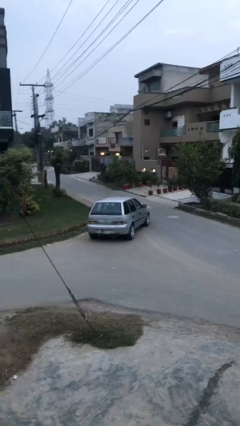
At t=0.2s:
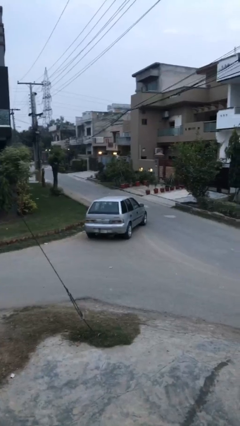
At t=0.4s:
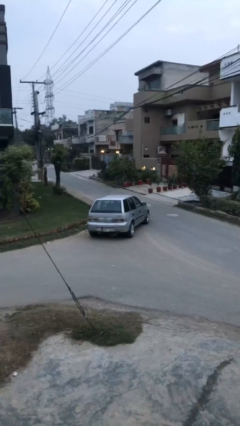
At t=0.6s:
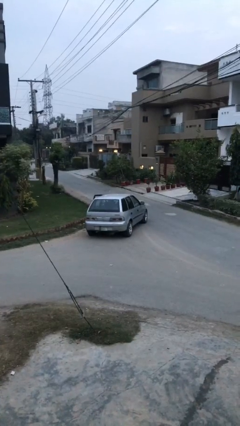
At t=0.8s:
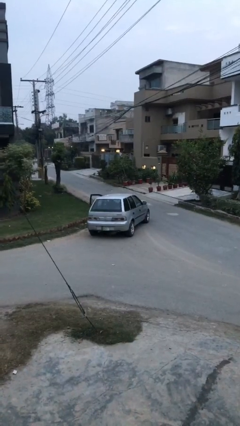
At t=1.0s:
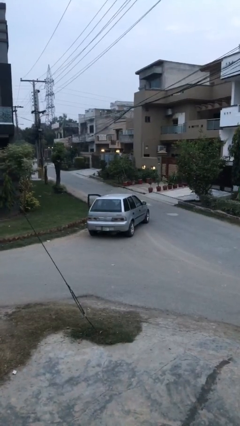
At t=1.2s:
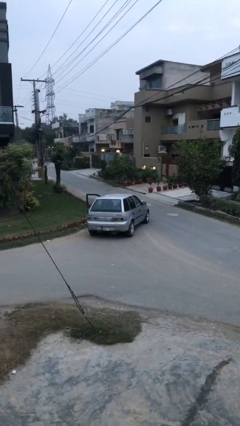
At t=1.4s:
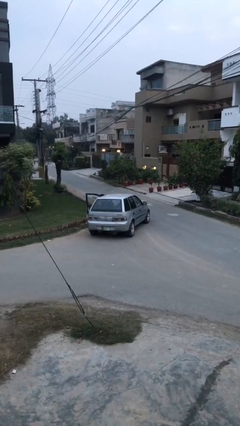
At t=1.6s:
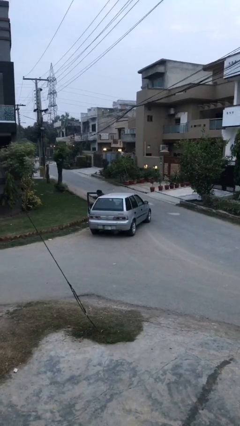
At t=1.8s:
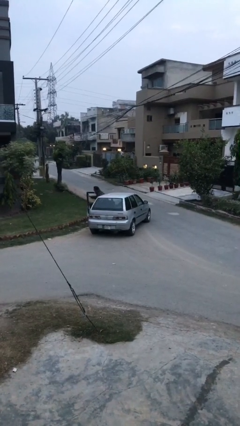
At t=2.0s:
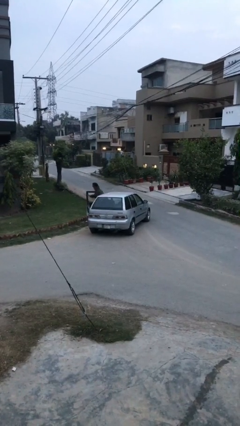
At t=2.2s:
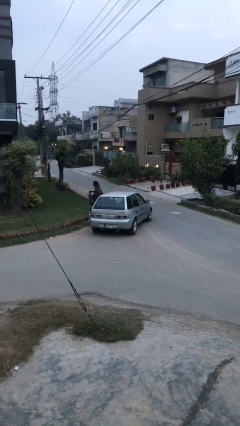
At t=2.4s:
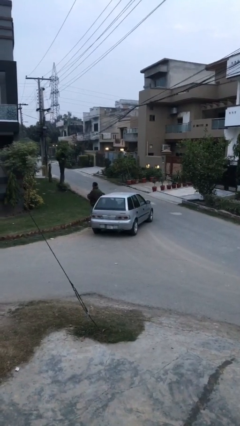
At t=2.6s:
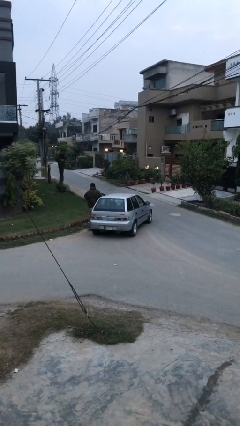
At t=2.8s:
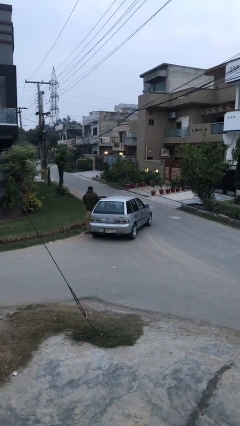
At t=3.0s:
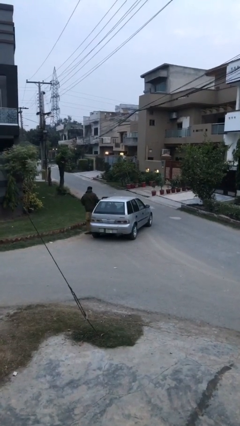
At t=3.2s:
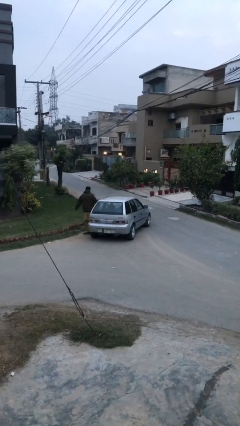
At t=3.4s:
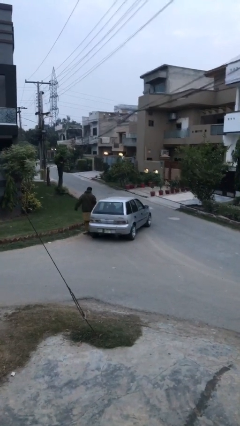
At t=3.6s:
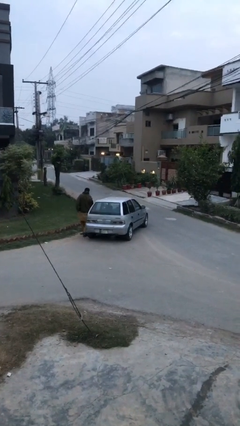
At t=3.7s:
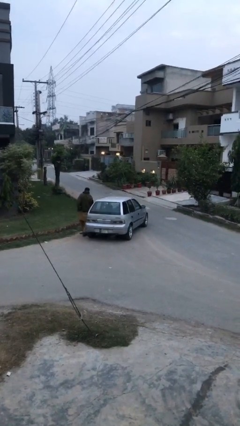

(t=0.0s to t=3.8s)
car drops off person

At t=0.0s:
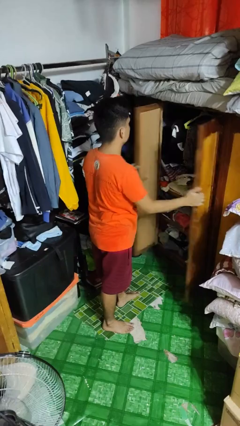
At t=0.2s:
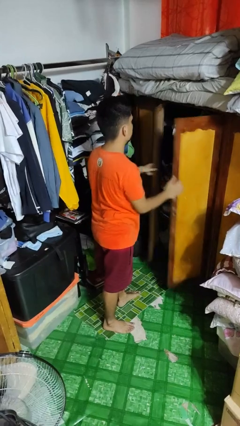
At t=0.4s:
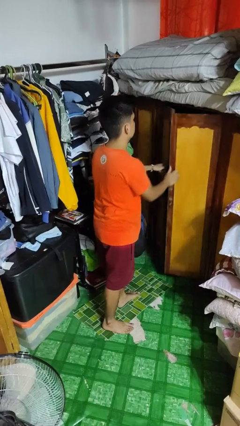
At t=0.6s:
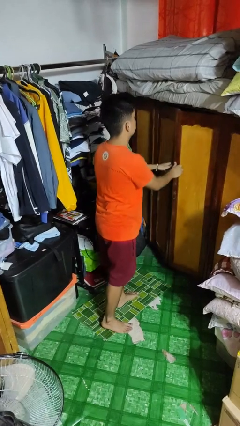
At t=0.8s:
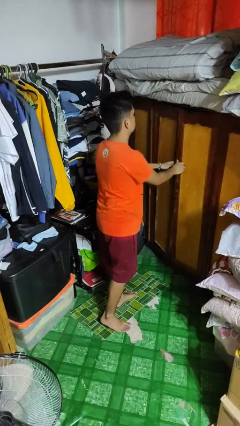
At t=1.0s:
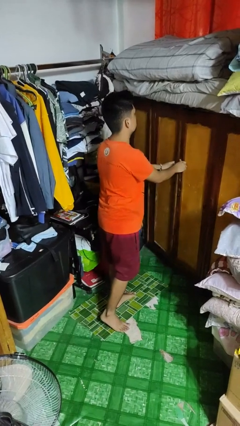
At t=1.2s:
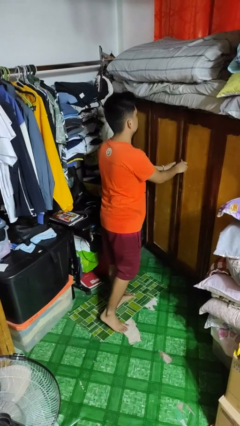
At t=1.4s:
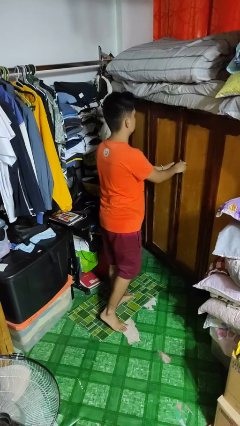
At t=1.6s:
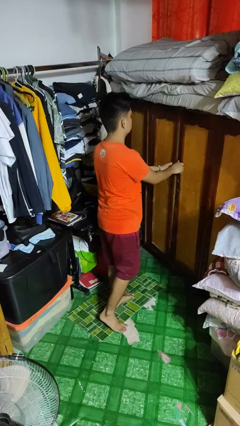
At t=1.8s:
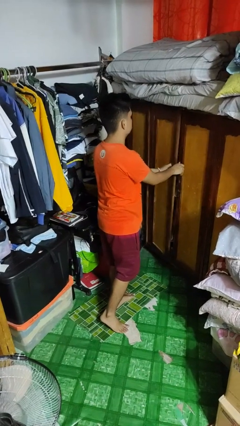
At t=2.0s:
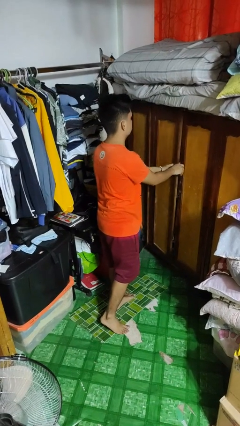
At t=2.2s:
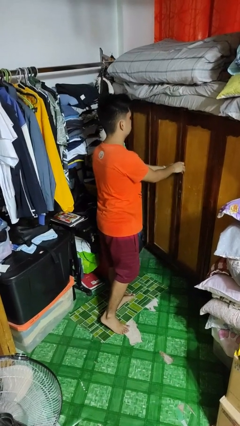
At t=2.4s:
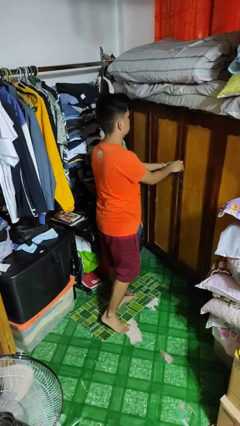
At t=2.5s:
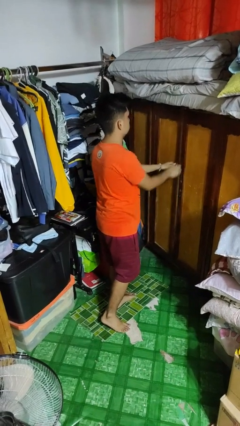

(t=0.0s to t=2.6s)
person closes closet door

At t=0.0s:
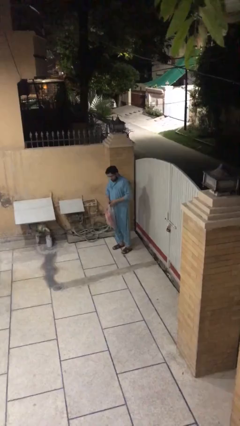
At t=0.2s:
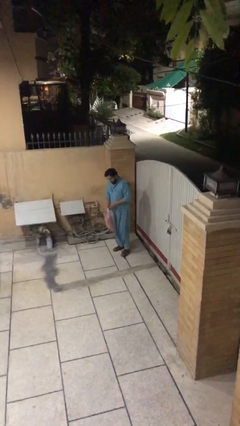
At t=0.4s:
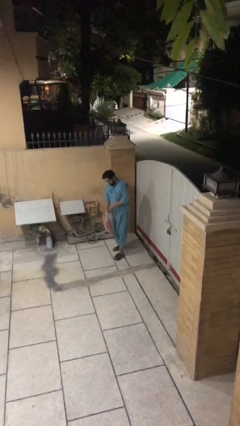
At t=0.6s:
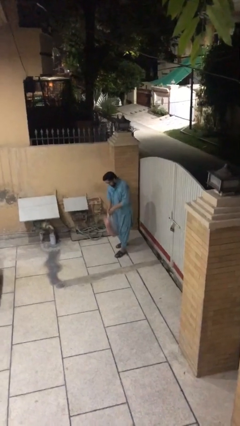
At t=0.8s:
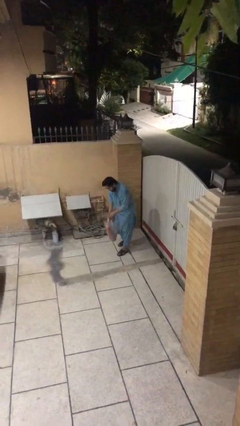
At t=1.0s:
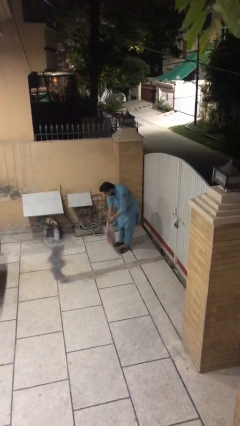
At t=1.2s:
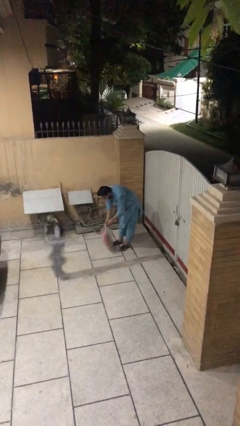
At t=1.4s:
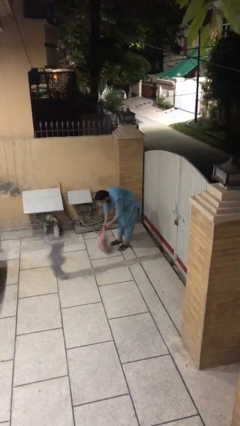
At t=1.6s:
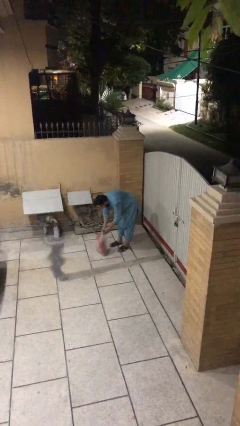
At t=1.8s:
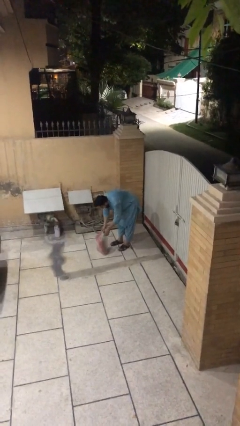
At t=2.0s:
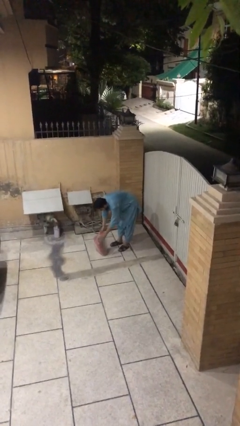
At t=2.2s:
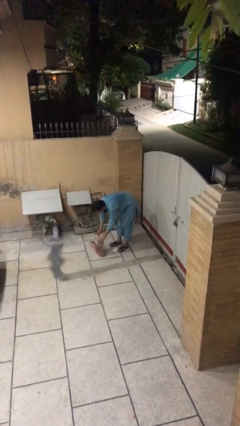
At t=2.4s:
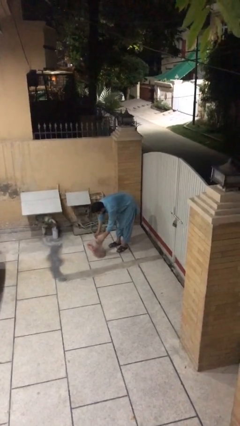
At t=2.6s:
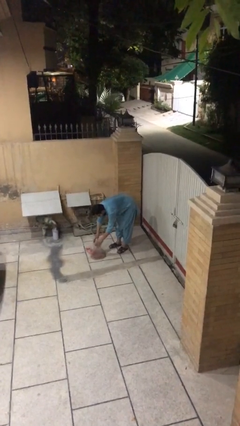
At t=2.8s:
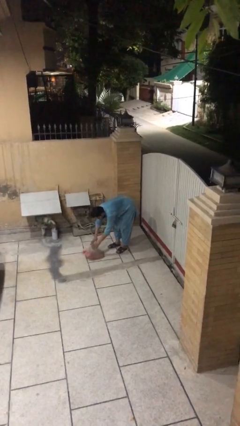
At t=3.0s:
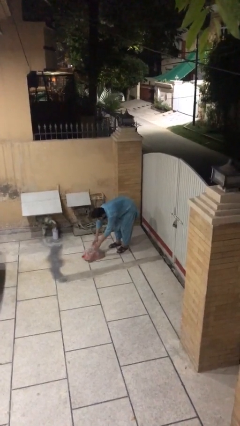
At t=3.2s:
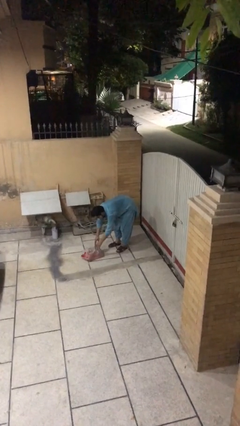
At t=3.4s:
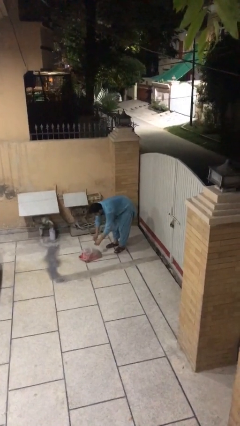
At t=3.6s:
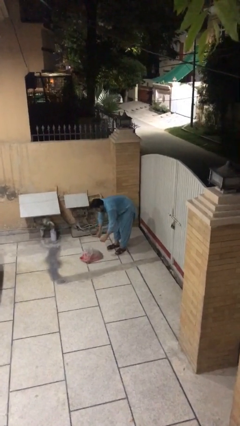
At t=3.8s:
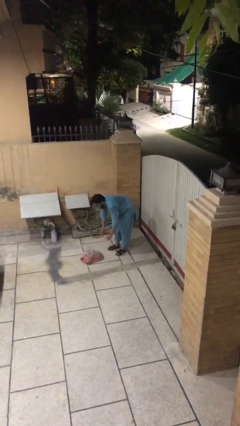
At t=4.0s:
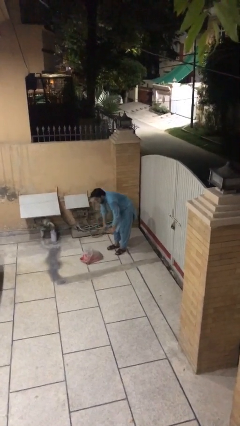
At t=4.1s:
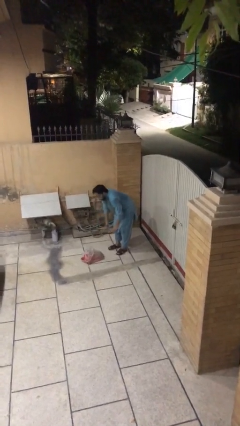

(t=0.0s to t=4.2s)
person puts down object on floor

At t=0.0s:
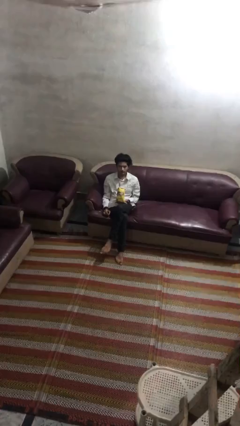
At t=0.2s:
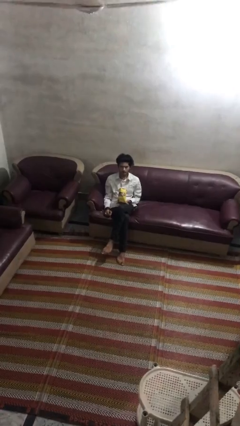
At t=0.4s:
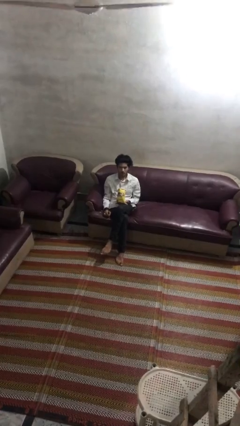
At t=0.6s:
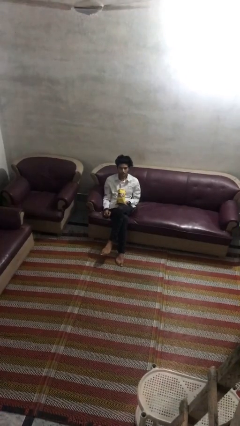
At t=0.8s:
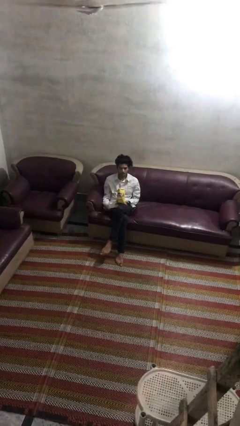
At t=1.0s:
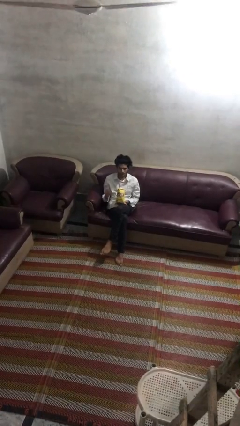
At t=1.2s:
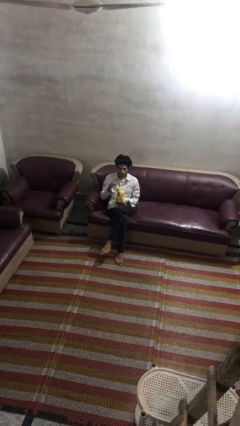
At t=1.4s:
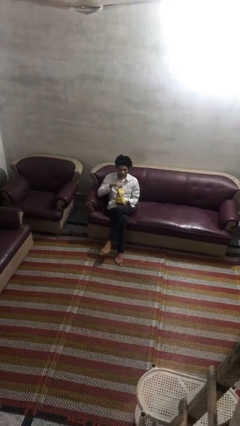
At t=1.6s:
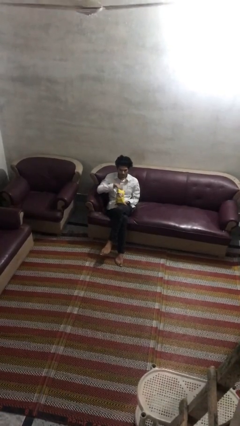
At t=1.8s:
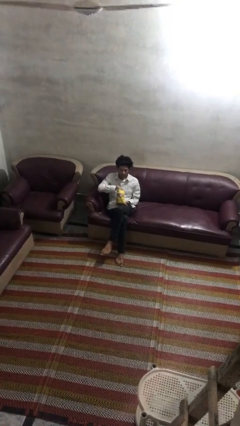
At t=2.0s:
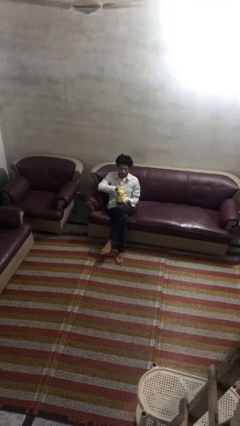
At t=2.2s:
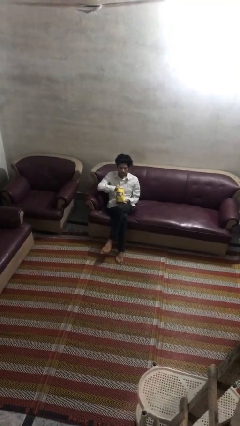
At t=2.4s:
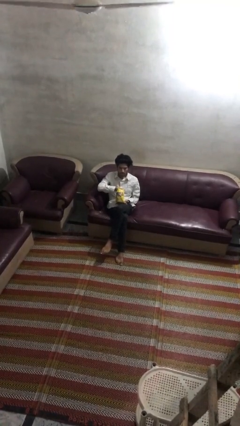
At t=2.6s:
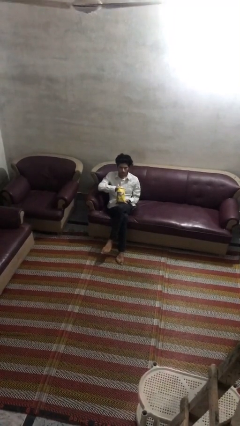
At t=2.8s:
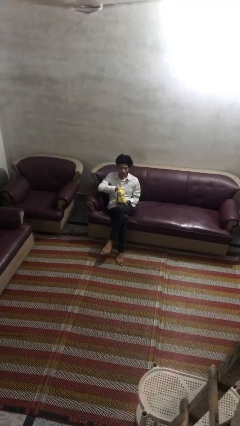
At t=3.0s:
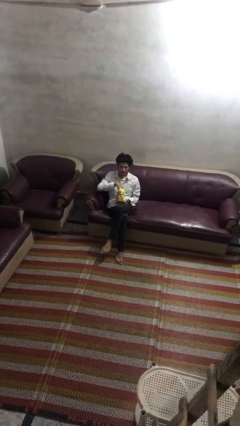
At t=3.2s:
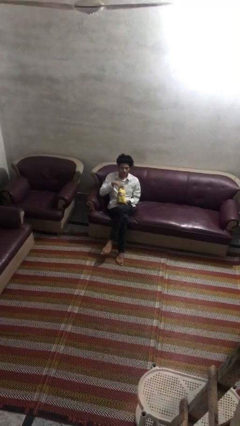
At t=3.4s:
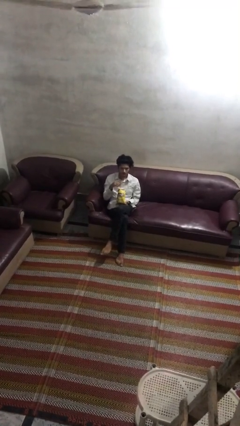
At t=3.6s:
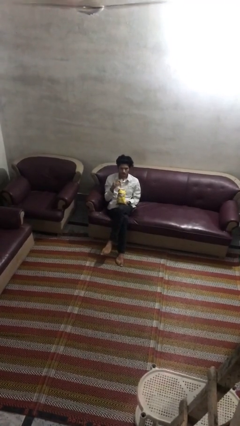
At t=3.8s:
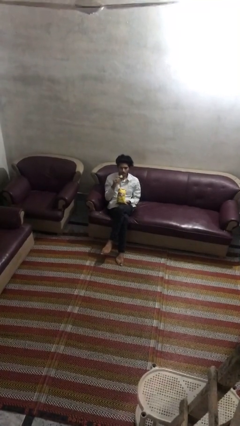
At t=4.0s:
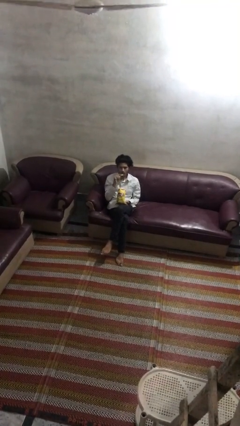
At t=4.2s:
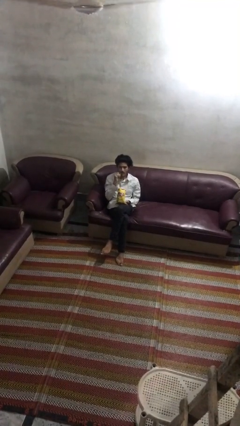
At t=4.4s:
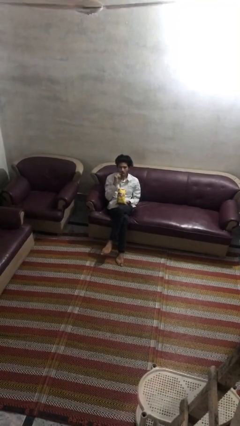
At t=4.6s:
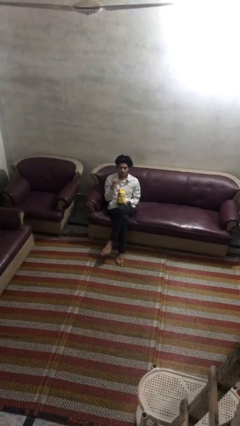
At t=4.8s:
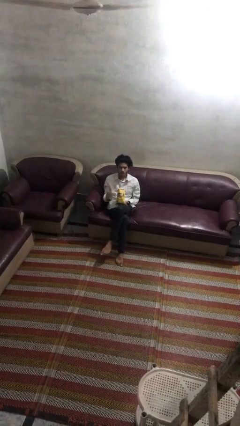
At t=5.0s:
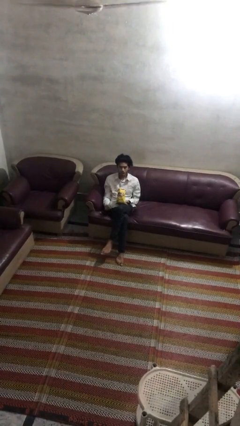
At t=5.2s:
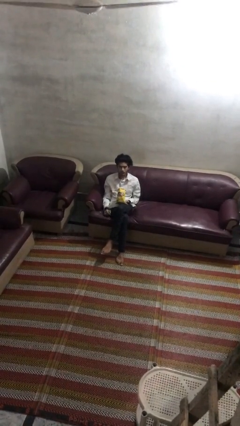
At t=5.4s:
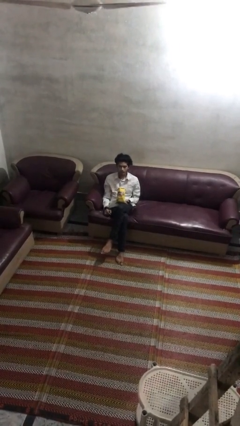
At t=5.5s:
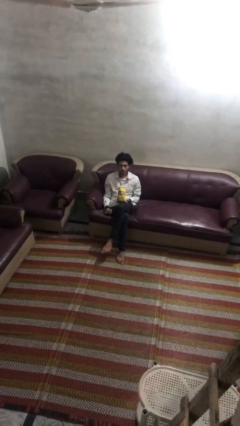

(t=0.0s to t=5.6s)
person eats snack from bag

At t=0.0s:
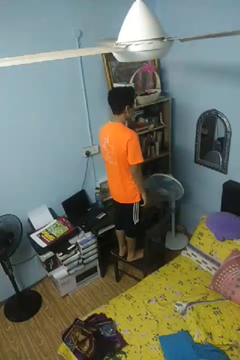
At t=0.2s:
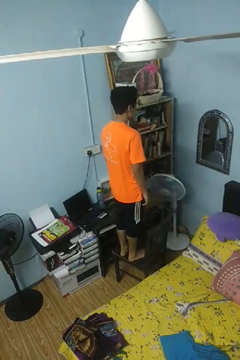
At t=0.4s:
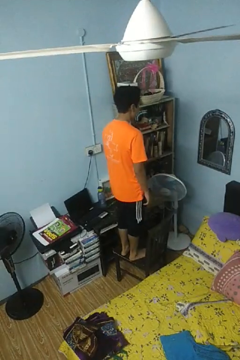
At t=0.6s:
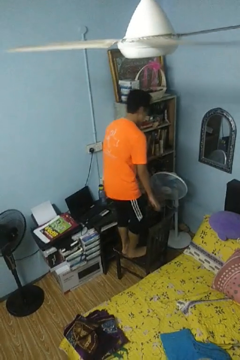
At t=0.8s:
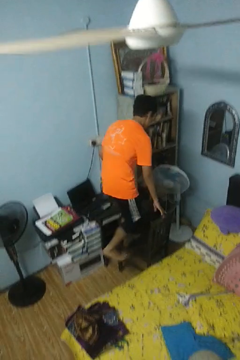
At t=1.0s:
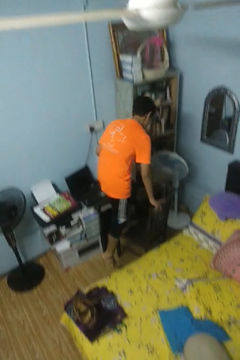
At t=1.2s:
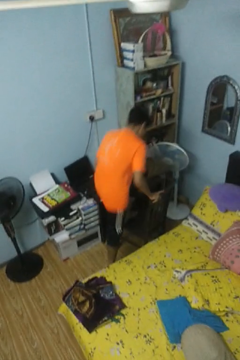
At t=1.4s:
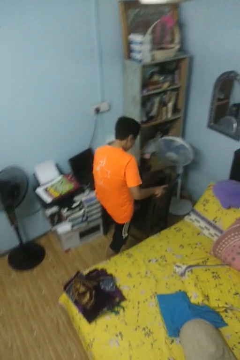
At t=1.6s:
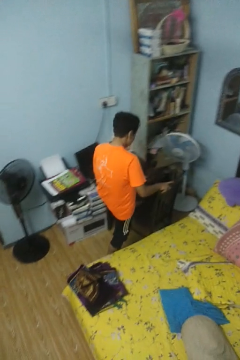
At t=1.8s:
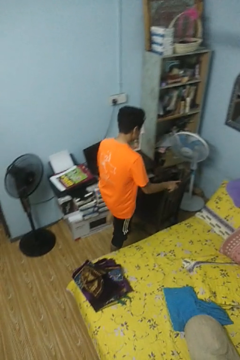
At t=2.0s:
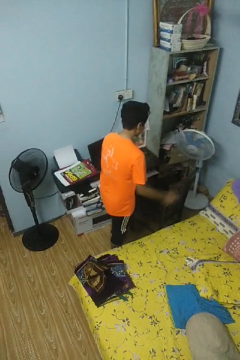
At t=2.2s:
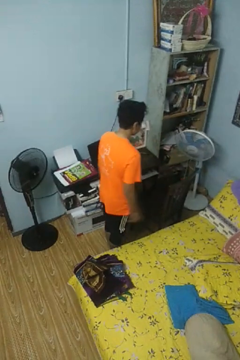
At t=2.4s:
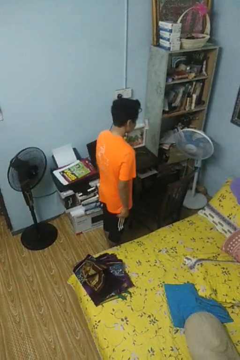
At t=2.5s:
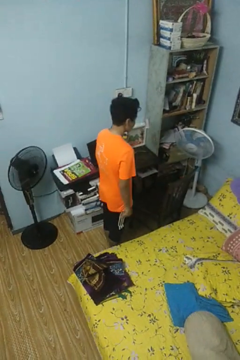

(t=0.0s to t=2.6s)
person climbs off chair
